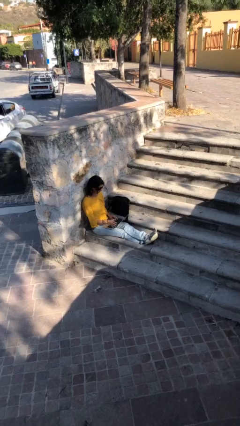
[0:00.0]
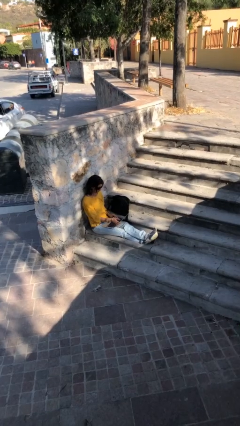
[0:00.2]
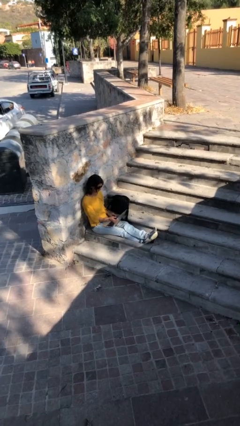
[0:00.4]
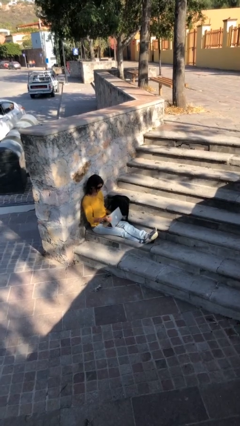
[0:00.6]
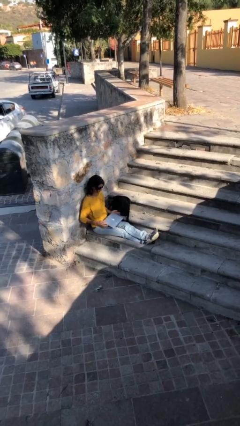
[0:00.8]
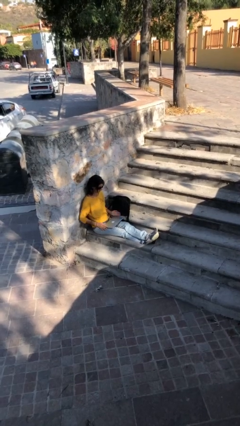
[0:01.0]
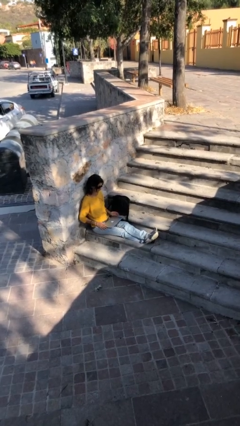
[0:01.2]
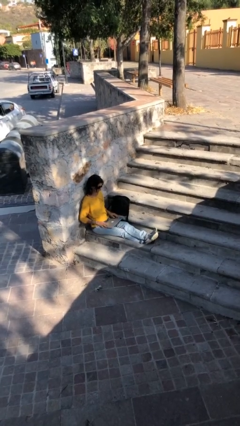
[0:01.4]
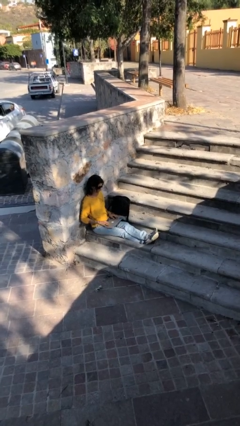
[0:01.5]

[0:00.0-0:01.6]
person interacts with laptop

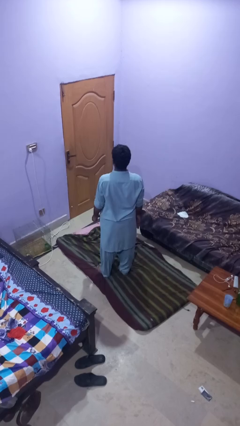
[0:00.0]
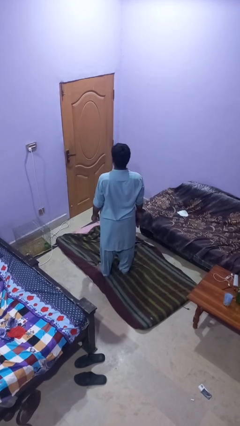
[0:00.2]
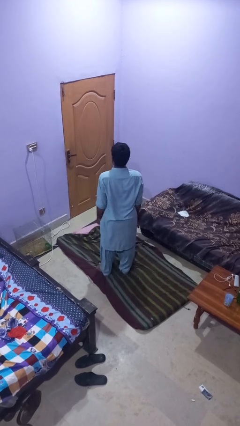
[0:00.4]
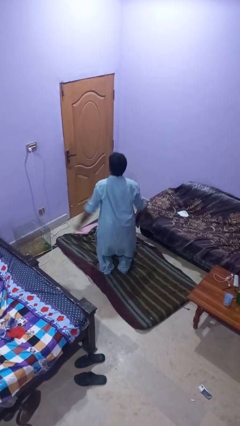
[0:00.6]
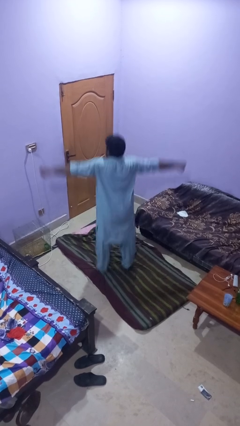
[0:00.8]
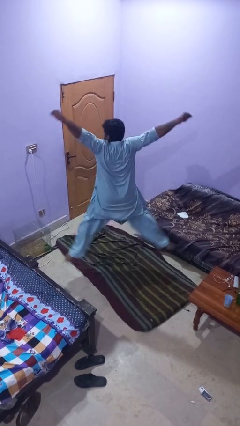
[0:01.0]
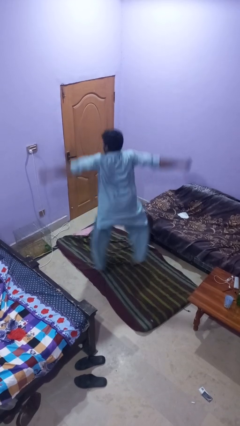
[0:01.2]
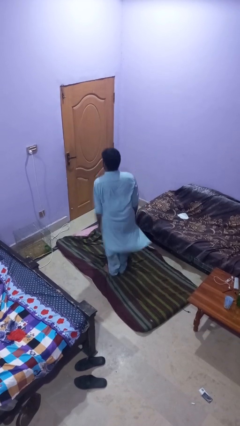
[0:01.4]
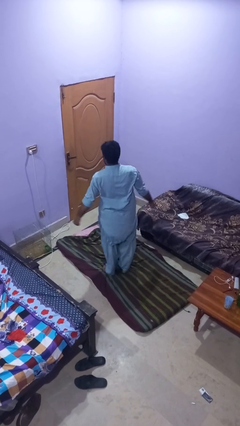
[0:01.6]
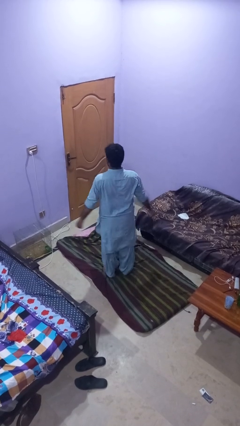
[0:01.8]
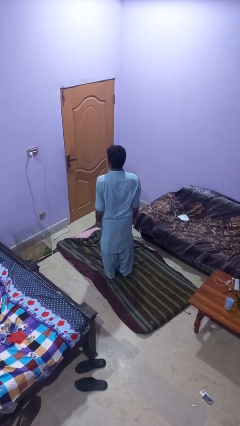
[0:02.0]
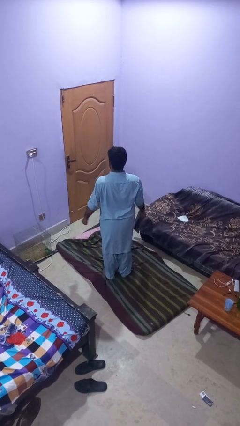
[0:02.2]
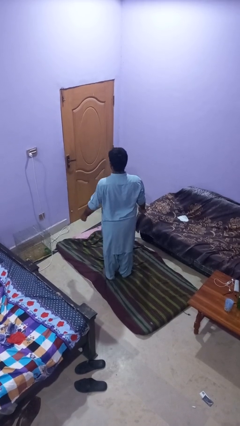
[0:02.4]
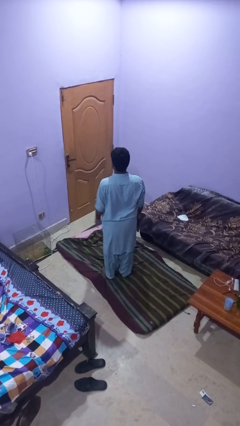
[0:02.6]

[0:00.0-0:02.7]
person exercises with jumping jacks

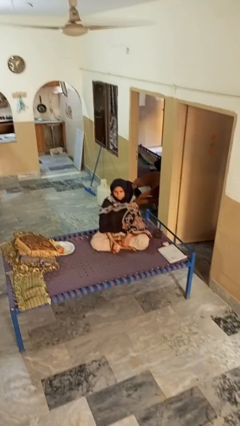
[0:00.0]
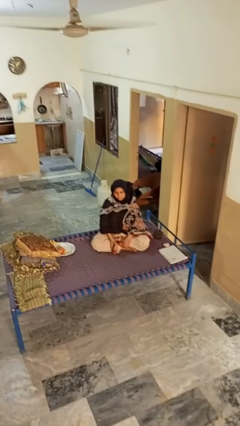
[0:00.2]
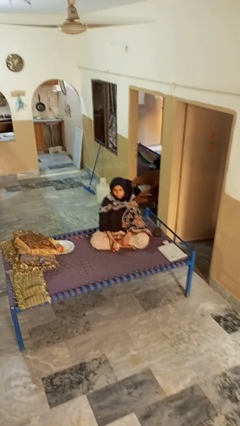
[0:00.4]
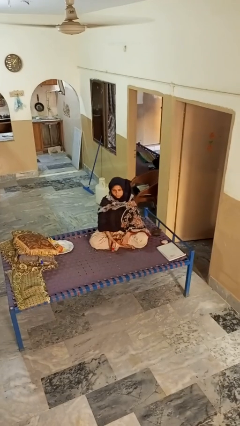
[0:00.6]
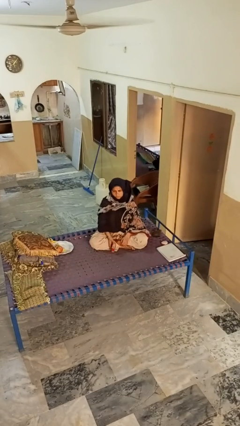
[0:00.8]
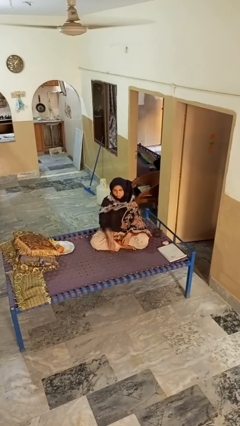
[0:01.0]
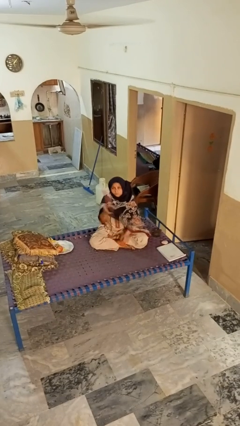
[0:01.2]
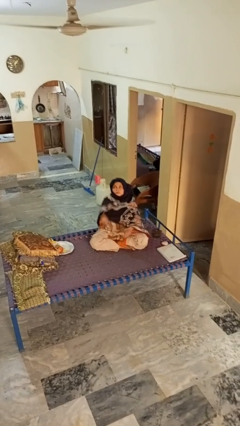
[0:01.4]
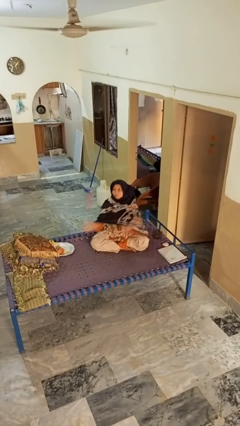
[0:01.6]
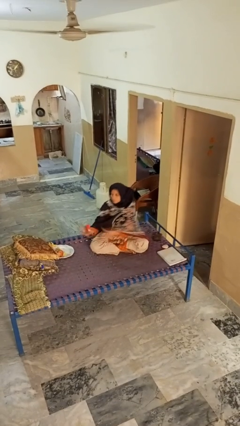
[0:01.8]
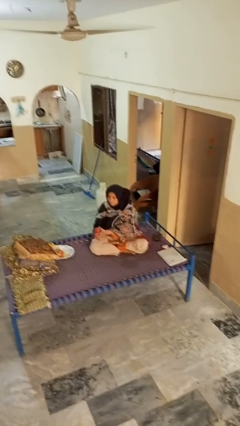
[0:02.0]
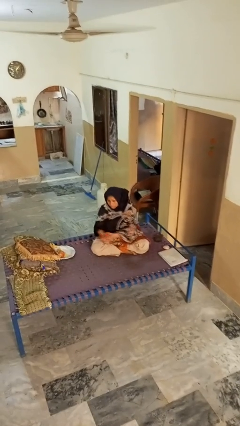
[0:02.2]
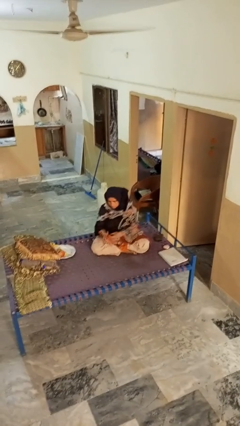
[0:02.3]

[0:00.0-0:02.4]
person drops object

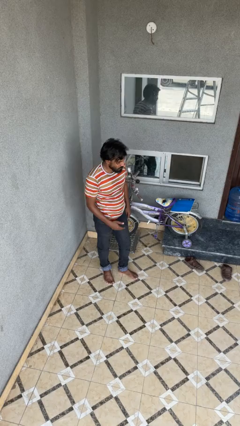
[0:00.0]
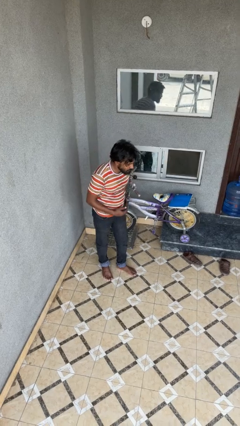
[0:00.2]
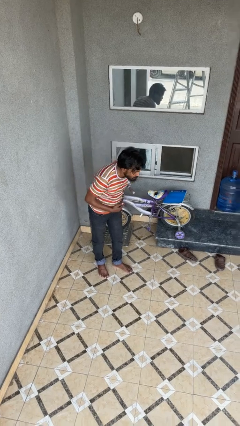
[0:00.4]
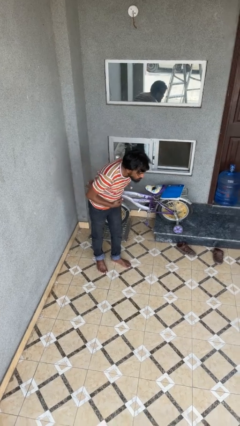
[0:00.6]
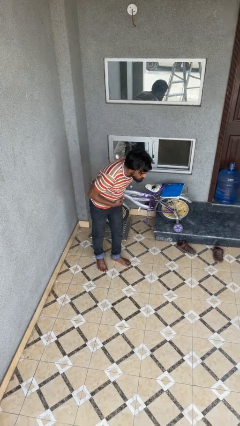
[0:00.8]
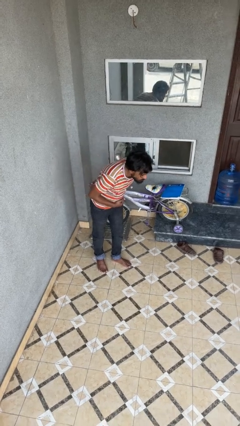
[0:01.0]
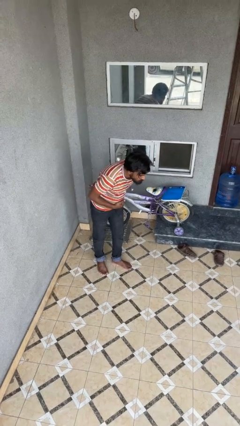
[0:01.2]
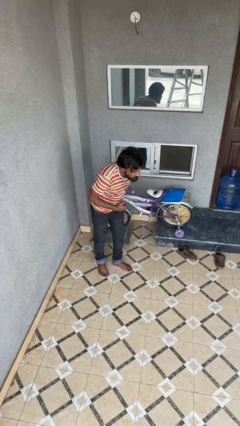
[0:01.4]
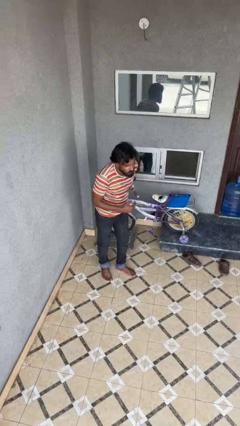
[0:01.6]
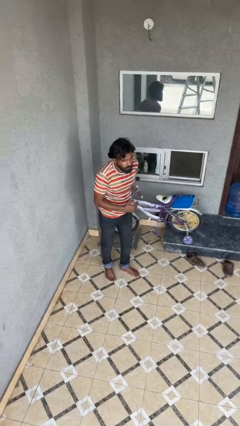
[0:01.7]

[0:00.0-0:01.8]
person bows

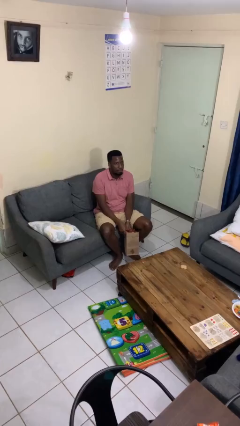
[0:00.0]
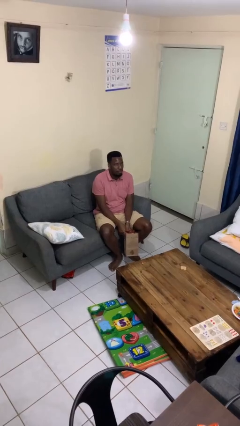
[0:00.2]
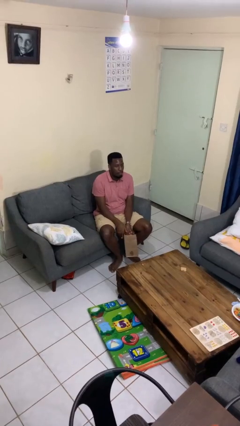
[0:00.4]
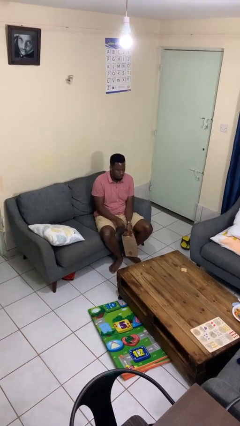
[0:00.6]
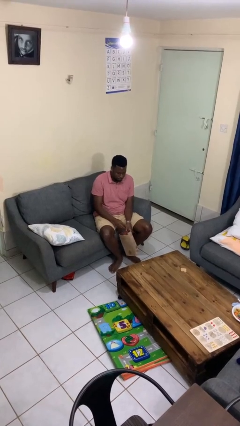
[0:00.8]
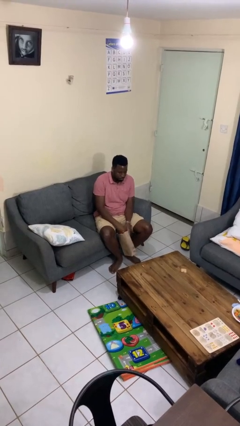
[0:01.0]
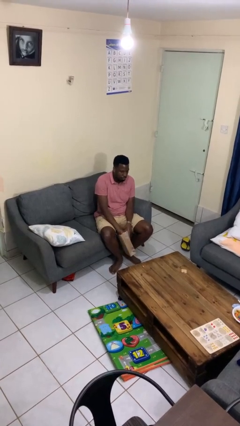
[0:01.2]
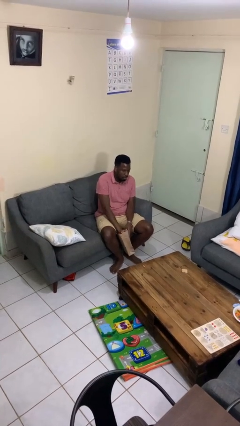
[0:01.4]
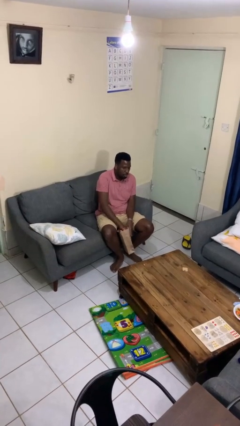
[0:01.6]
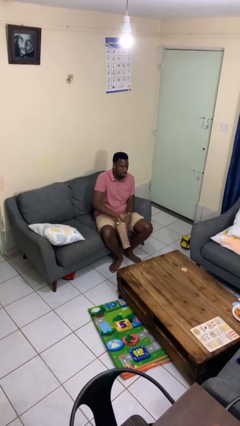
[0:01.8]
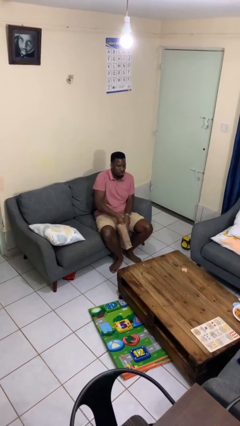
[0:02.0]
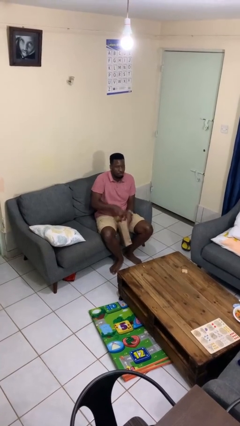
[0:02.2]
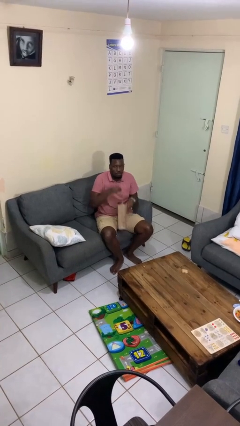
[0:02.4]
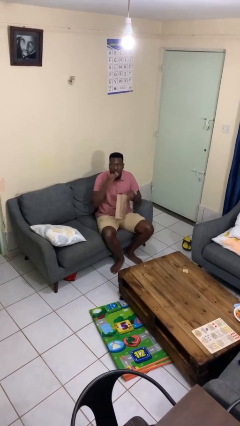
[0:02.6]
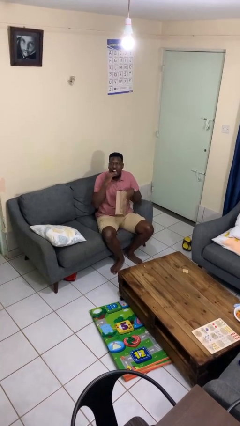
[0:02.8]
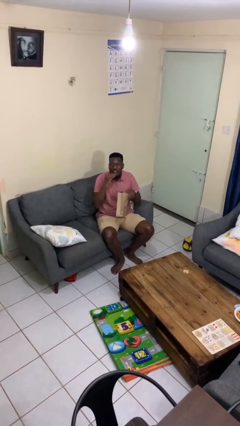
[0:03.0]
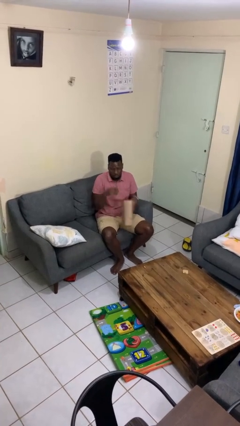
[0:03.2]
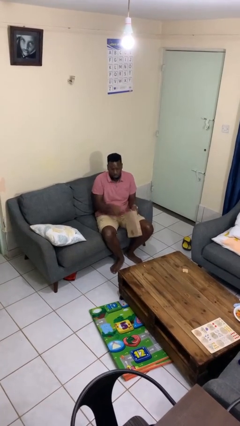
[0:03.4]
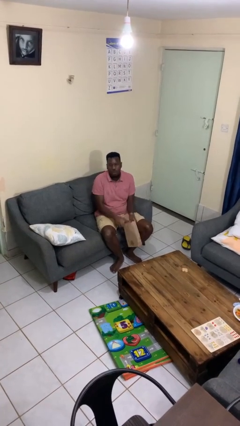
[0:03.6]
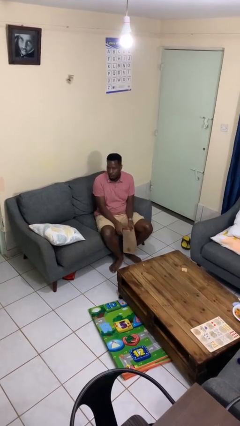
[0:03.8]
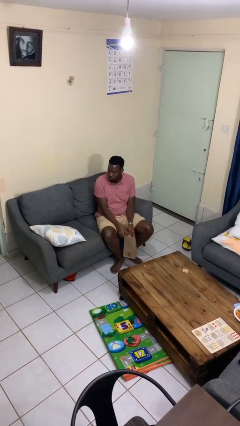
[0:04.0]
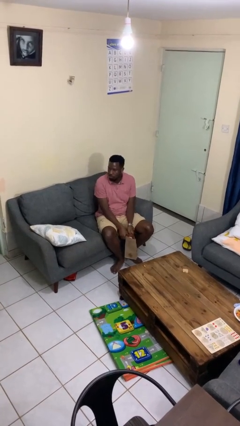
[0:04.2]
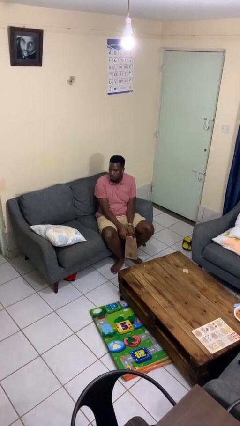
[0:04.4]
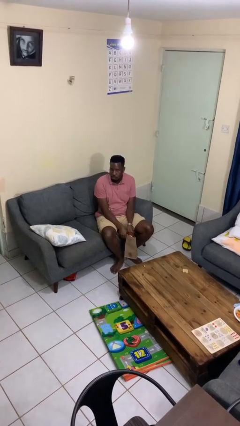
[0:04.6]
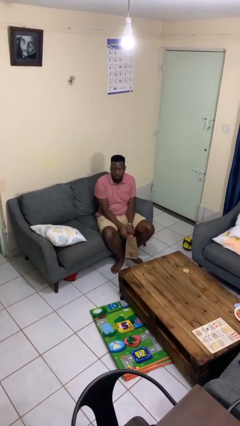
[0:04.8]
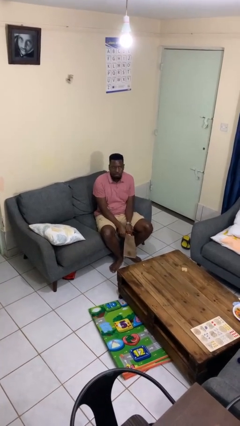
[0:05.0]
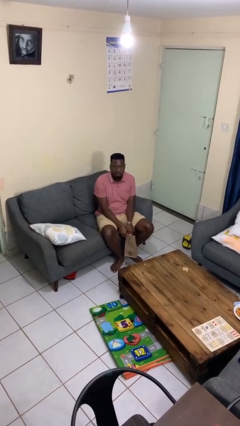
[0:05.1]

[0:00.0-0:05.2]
person eats snack from bag

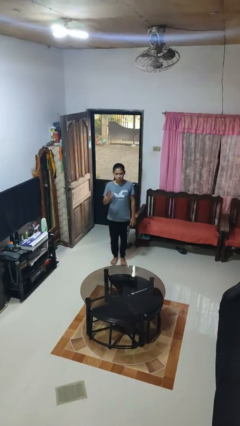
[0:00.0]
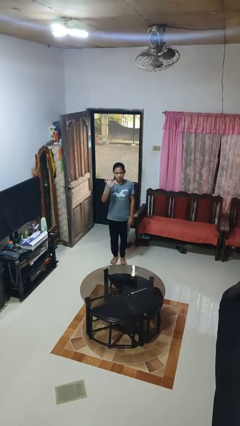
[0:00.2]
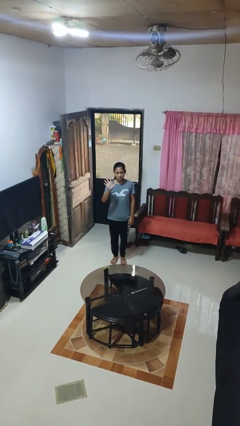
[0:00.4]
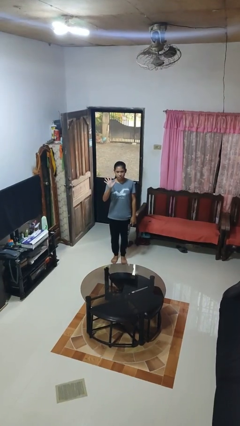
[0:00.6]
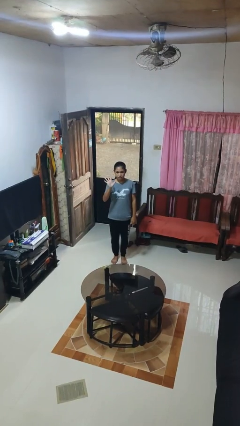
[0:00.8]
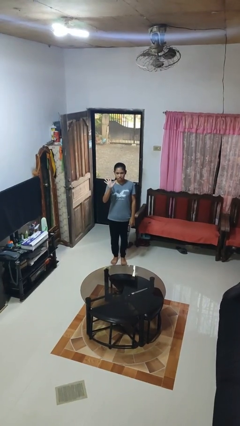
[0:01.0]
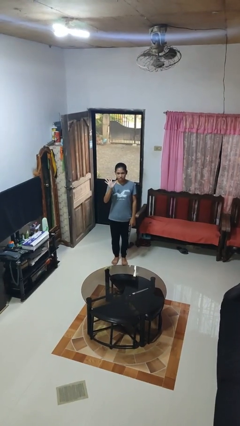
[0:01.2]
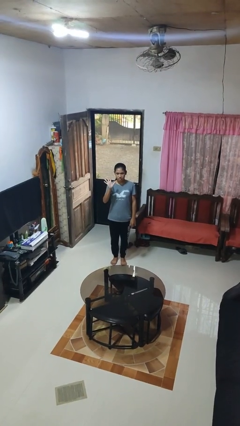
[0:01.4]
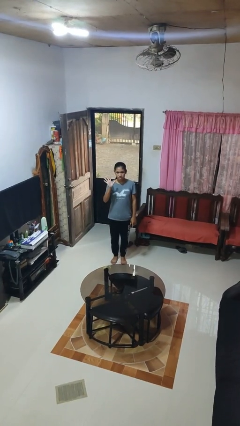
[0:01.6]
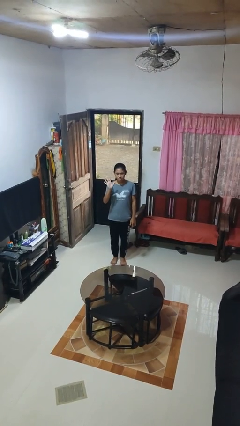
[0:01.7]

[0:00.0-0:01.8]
person gestures number five

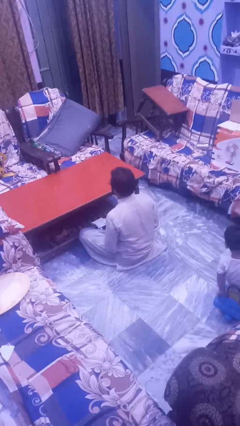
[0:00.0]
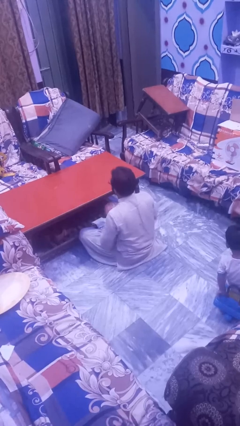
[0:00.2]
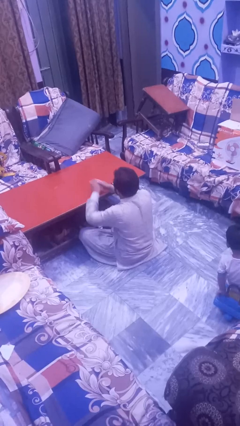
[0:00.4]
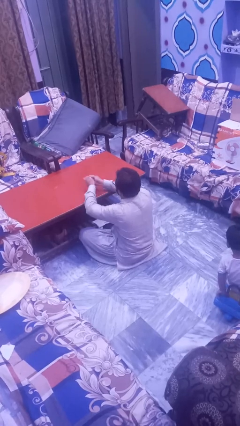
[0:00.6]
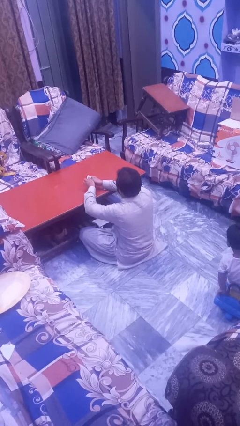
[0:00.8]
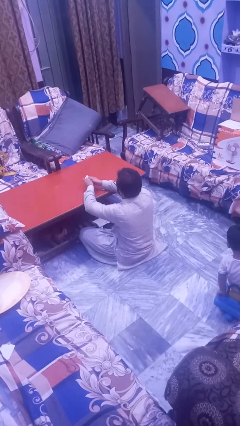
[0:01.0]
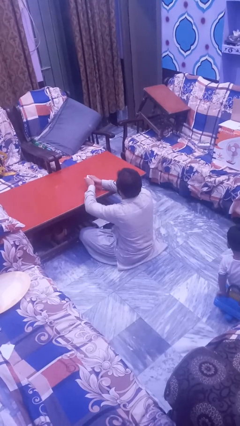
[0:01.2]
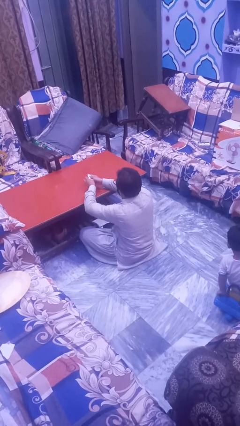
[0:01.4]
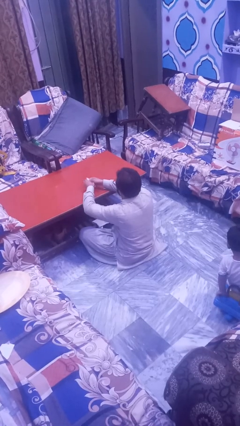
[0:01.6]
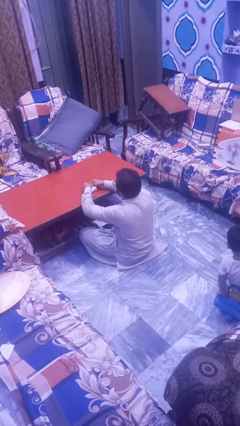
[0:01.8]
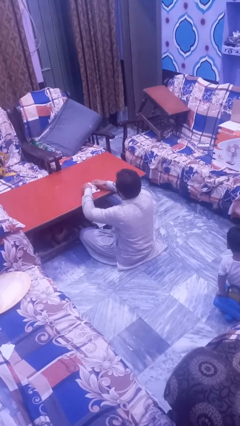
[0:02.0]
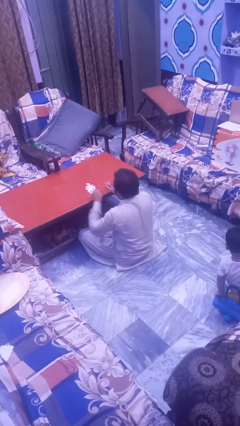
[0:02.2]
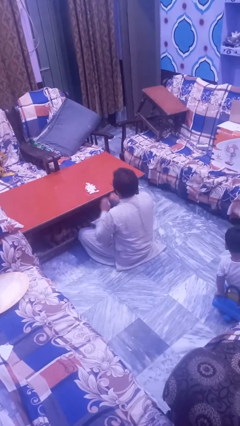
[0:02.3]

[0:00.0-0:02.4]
person crumples paper
